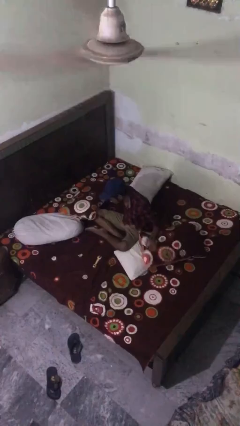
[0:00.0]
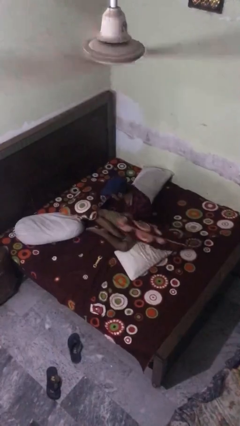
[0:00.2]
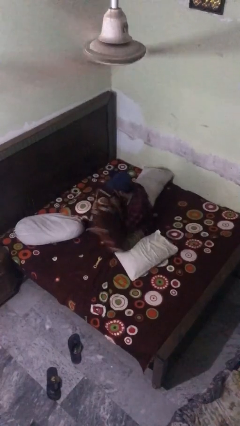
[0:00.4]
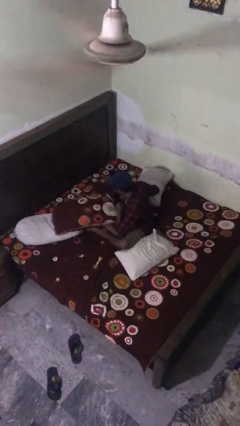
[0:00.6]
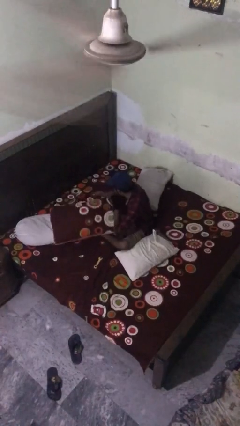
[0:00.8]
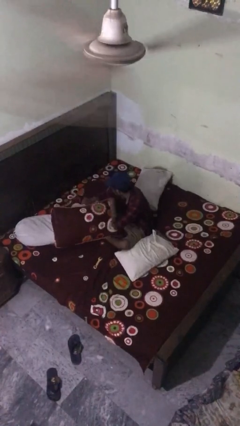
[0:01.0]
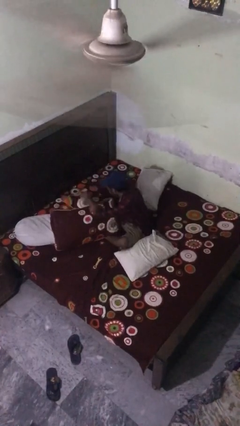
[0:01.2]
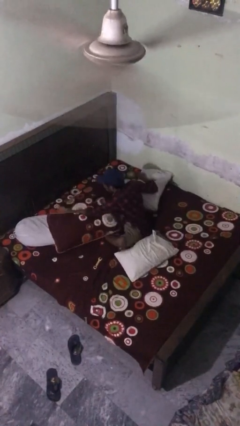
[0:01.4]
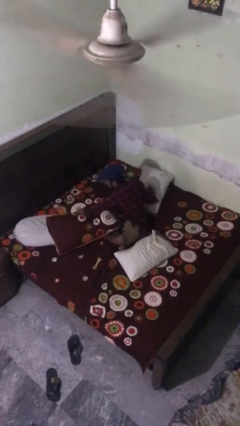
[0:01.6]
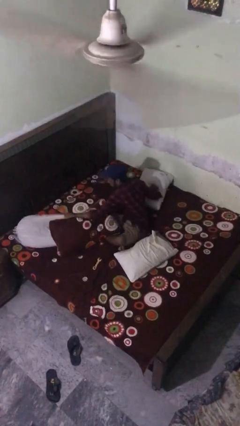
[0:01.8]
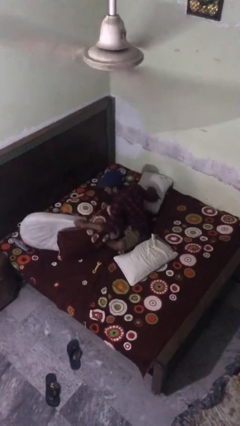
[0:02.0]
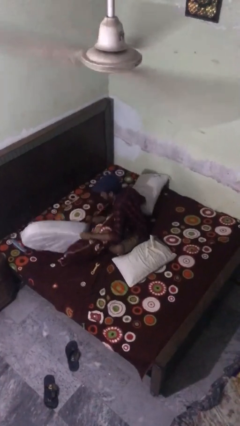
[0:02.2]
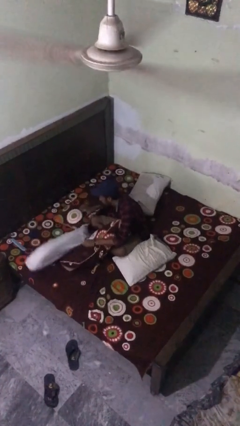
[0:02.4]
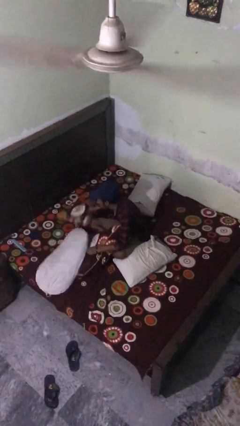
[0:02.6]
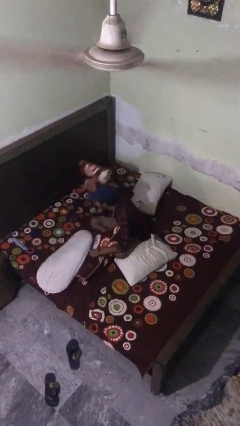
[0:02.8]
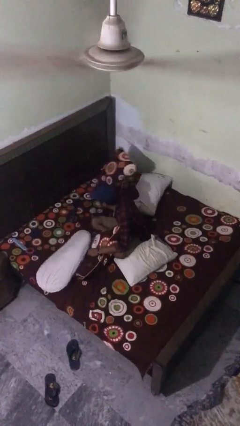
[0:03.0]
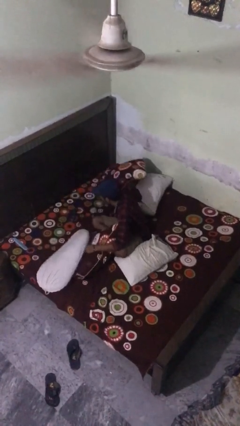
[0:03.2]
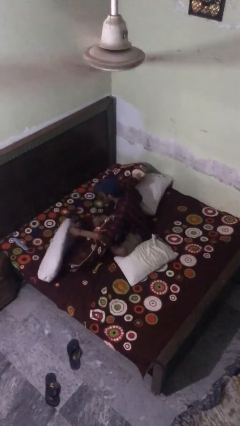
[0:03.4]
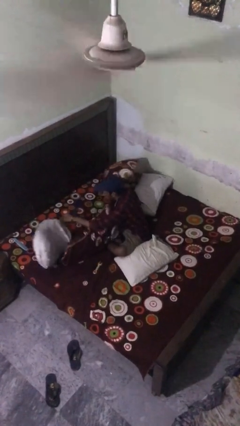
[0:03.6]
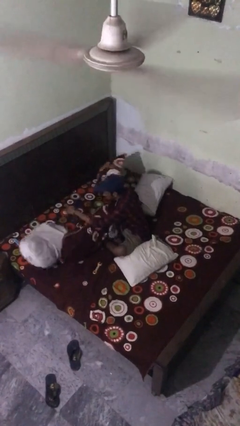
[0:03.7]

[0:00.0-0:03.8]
person searches under bed

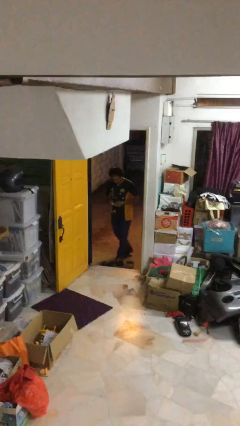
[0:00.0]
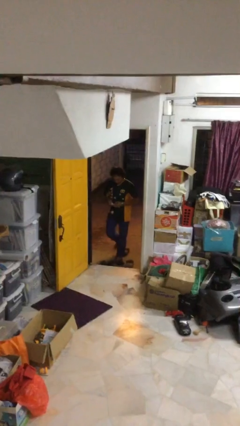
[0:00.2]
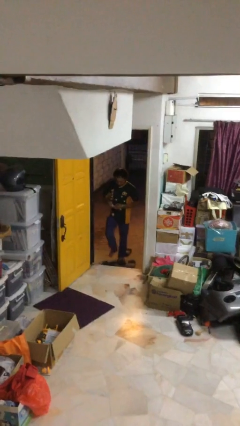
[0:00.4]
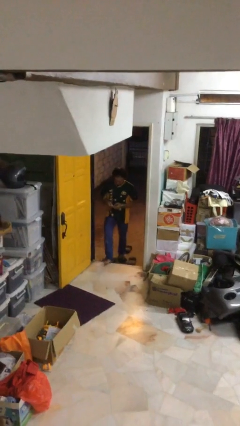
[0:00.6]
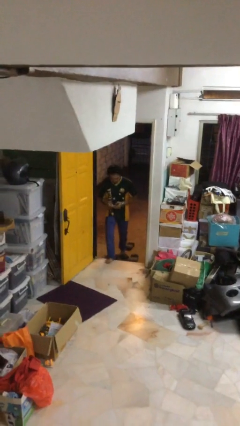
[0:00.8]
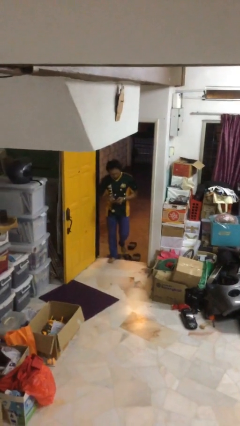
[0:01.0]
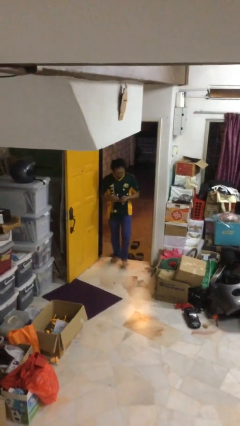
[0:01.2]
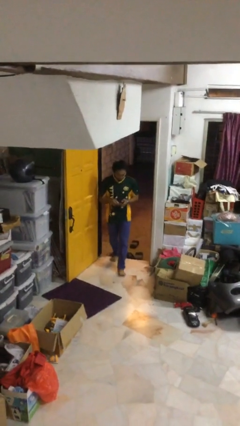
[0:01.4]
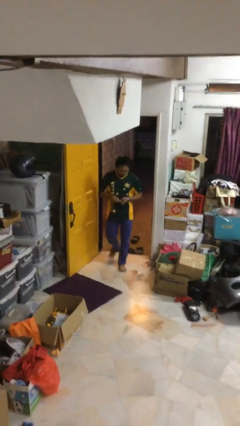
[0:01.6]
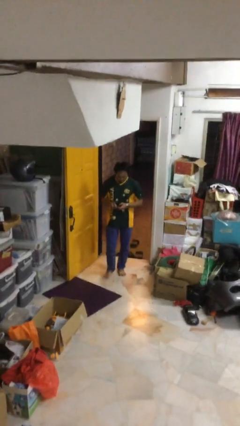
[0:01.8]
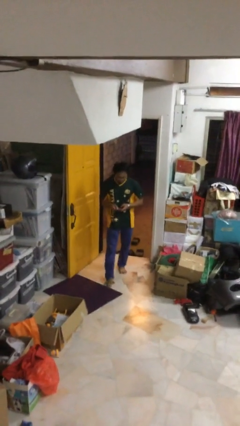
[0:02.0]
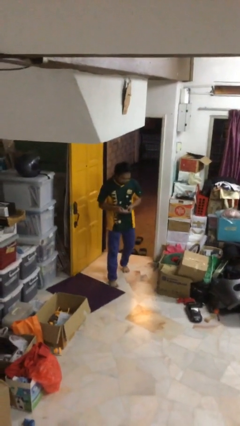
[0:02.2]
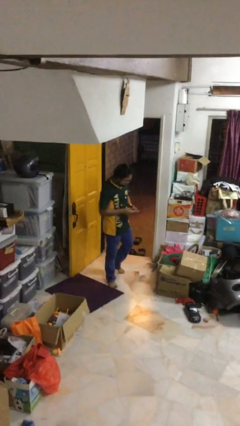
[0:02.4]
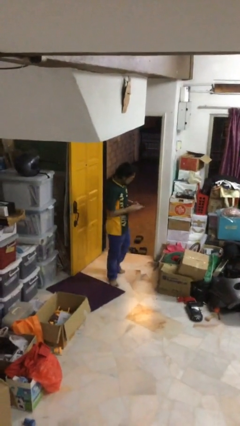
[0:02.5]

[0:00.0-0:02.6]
person enters scene through structure

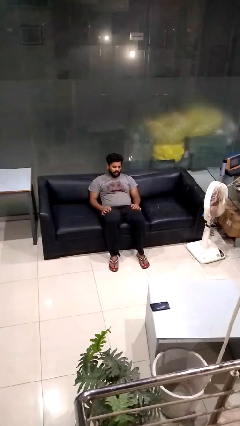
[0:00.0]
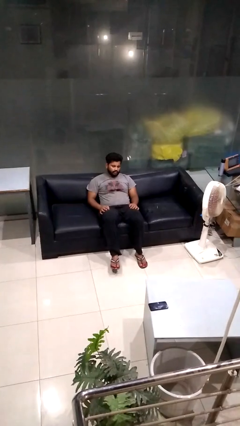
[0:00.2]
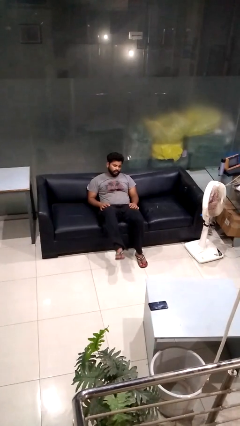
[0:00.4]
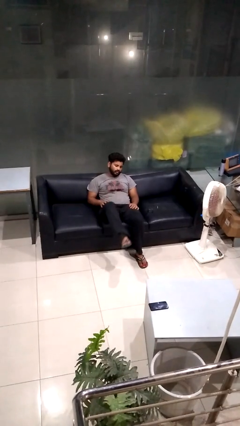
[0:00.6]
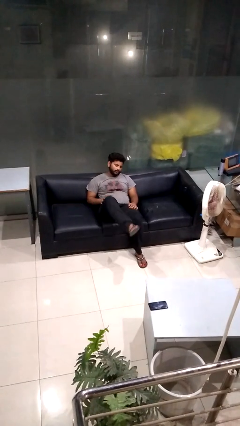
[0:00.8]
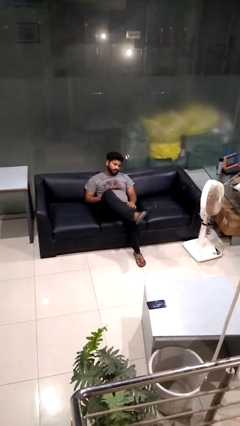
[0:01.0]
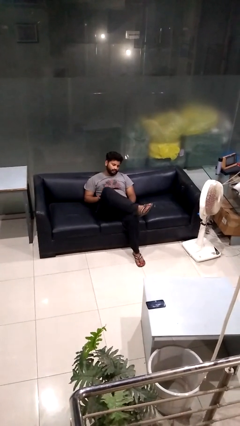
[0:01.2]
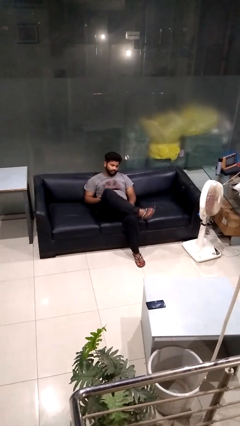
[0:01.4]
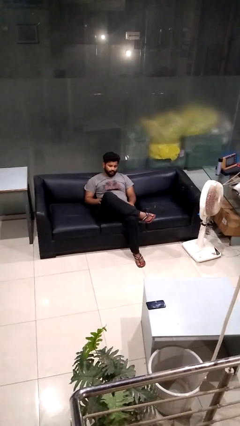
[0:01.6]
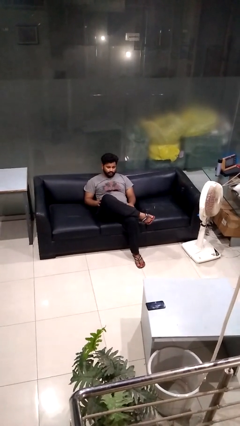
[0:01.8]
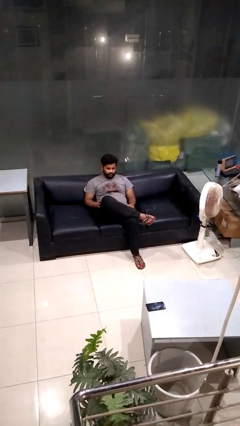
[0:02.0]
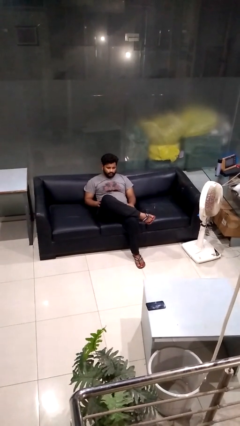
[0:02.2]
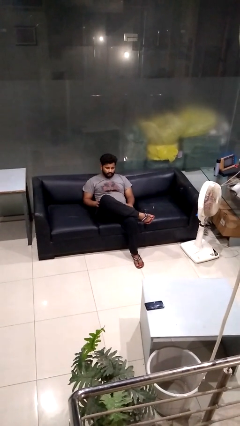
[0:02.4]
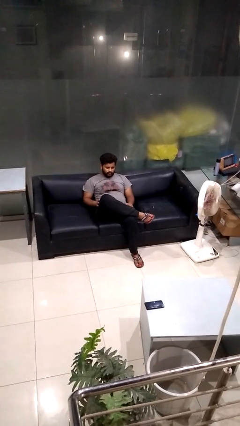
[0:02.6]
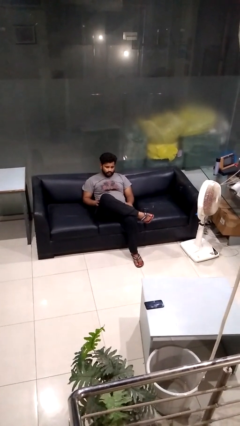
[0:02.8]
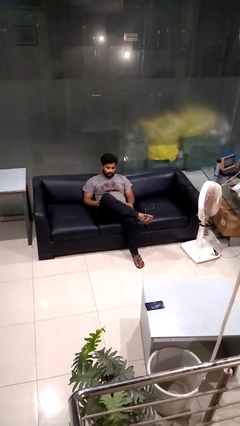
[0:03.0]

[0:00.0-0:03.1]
person crosses legs

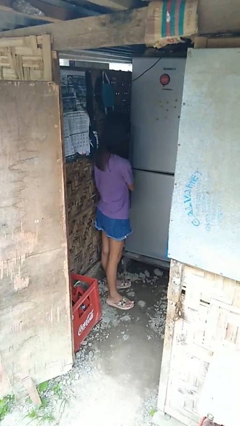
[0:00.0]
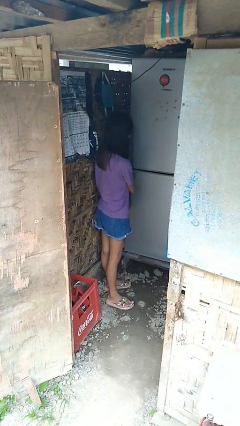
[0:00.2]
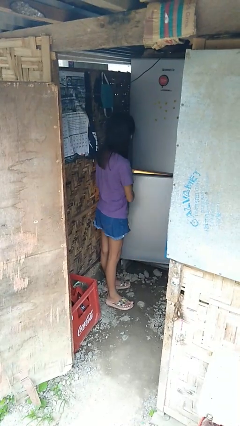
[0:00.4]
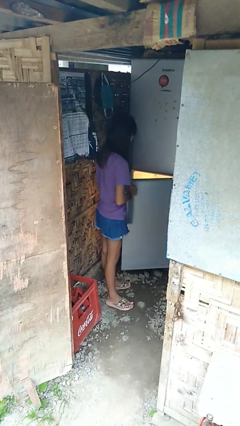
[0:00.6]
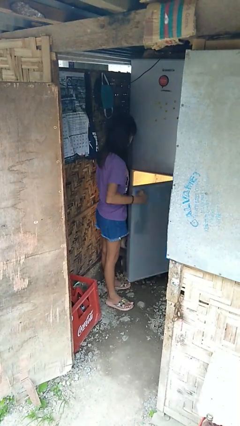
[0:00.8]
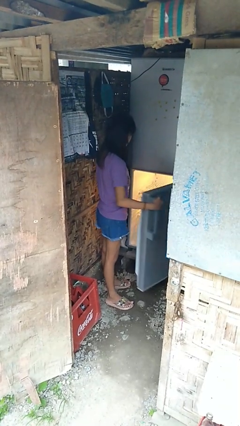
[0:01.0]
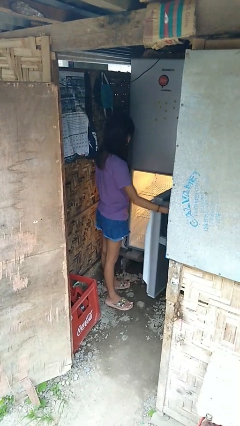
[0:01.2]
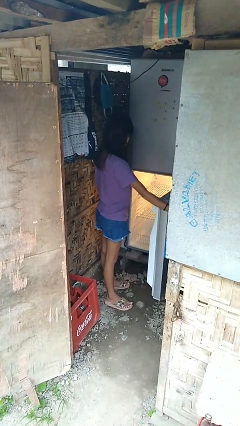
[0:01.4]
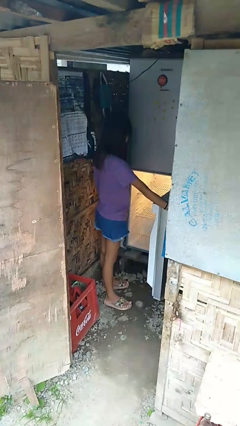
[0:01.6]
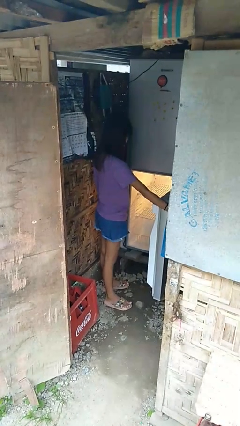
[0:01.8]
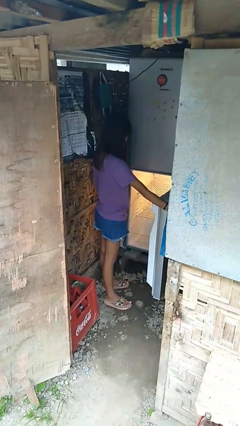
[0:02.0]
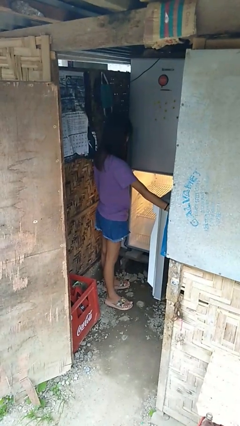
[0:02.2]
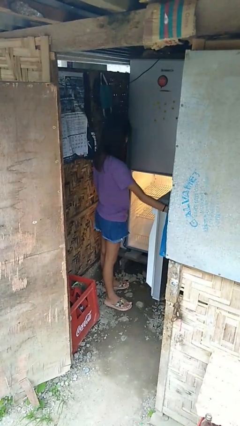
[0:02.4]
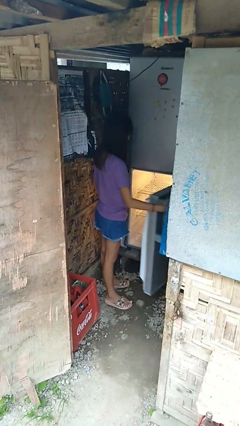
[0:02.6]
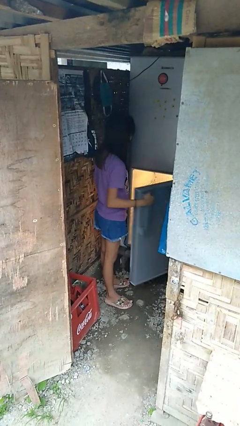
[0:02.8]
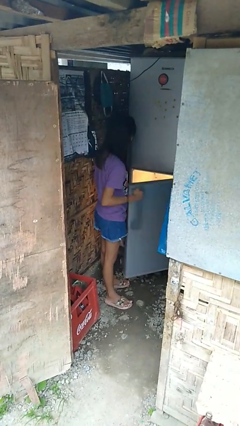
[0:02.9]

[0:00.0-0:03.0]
person opens refrigerator

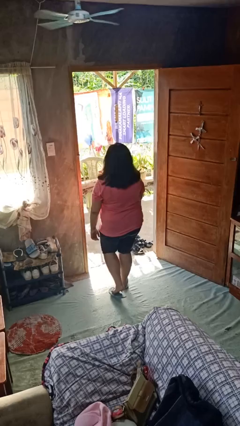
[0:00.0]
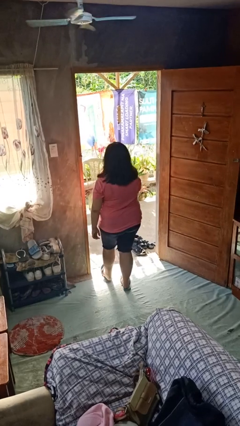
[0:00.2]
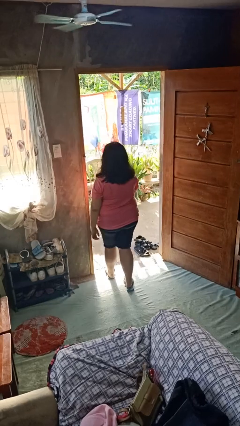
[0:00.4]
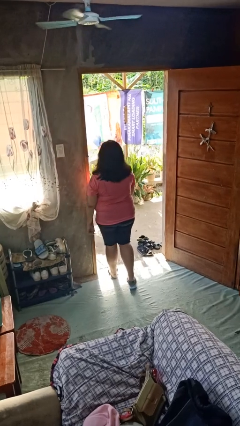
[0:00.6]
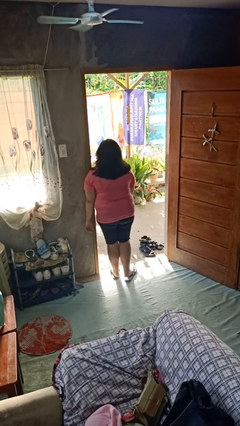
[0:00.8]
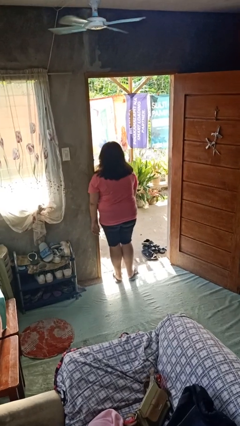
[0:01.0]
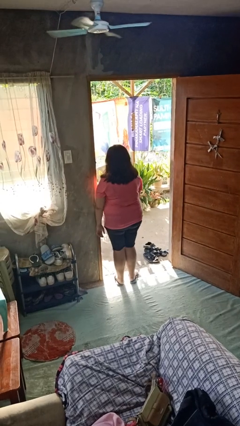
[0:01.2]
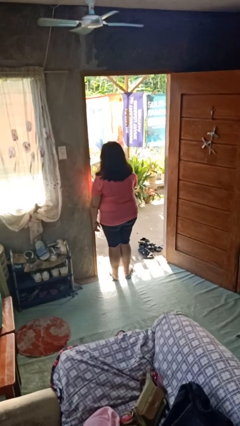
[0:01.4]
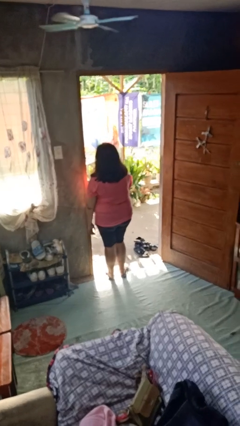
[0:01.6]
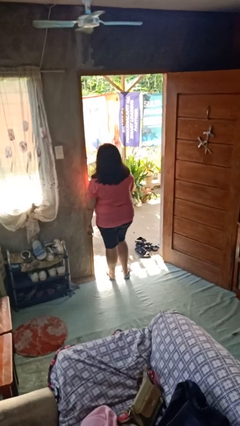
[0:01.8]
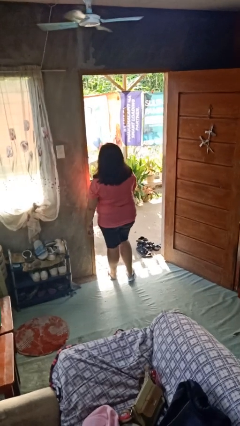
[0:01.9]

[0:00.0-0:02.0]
person bumps into wall
